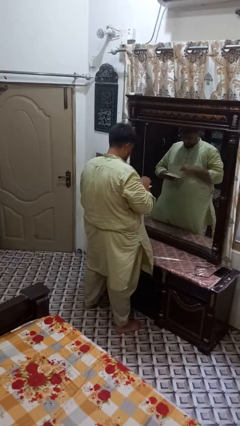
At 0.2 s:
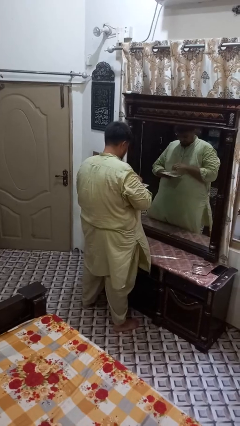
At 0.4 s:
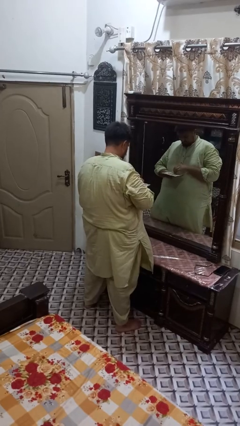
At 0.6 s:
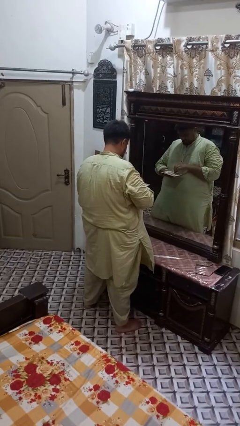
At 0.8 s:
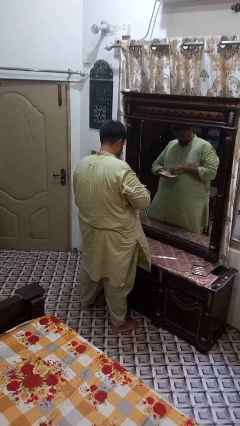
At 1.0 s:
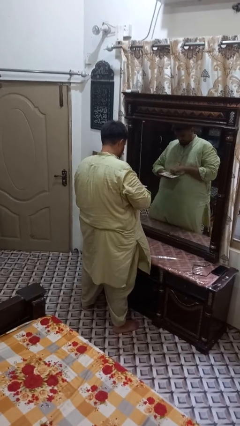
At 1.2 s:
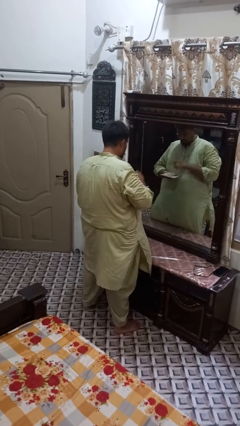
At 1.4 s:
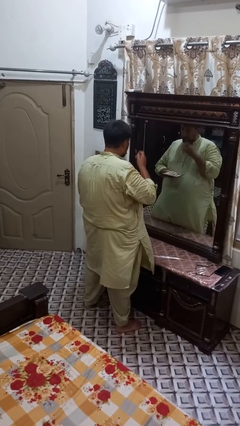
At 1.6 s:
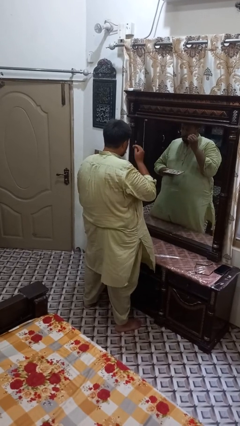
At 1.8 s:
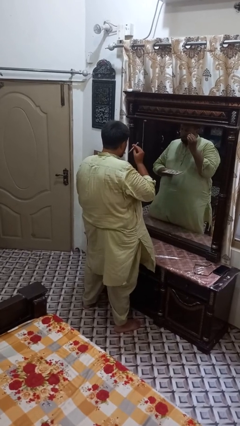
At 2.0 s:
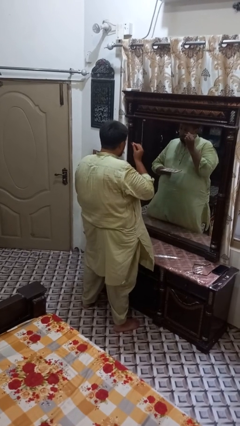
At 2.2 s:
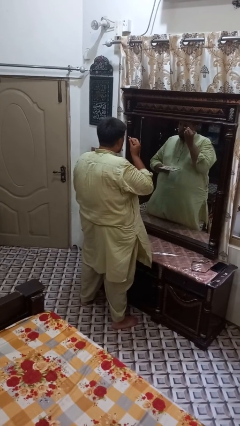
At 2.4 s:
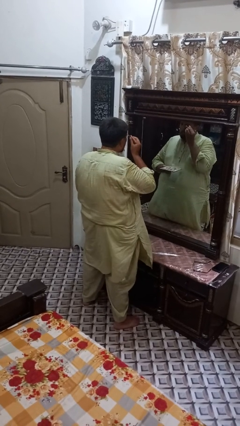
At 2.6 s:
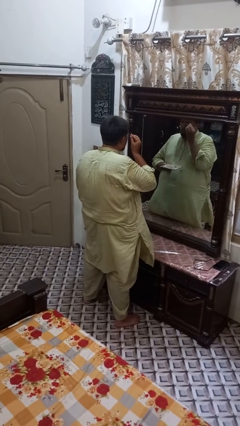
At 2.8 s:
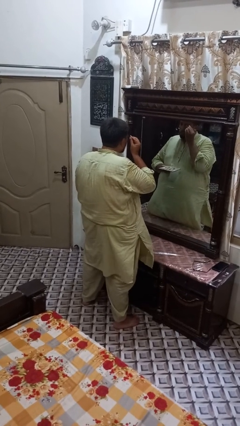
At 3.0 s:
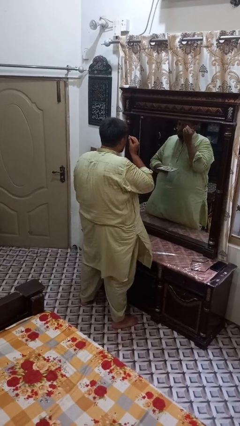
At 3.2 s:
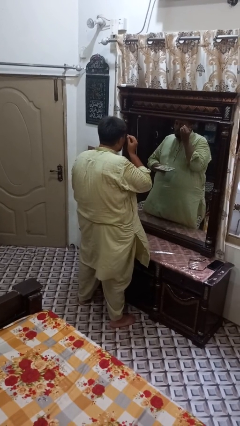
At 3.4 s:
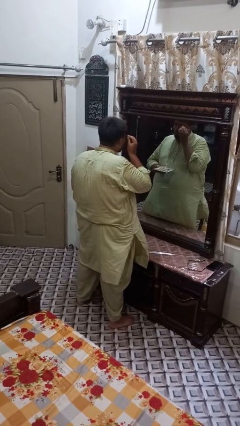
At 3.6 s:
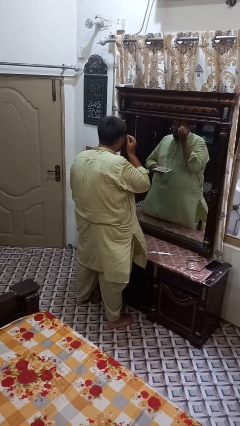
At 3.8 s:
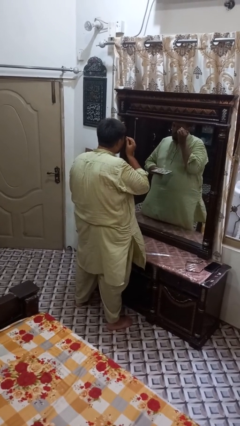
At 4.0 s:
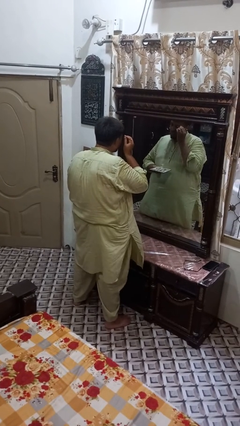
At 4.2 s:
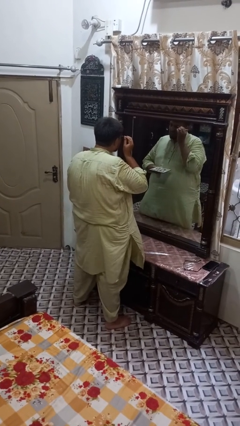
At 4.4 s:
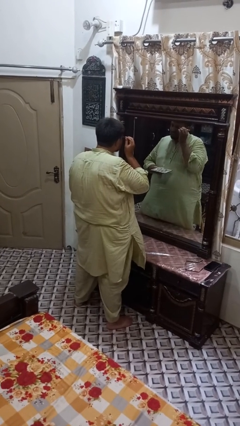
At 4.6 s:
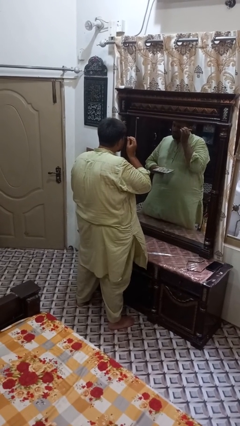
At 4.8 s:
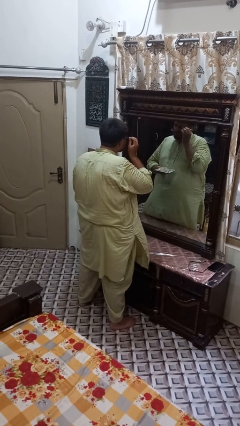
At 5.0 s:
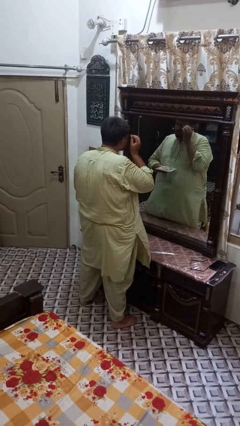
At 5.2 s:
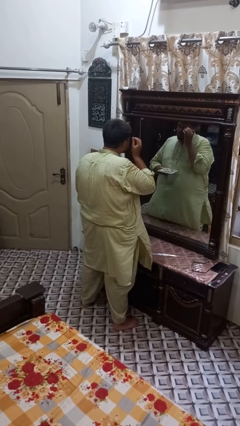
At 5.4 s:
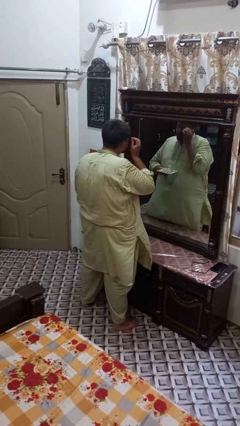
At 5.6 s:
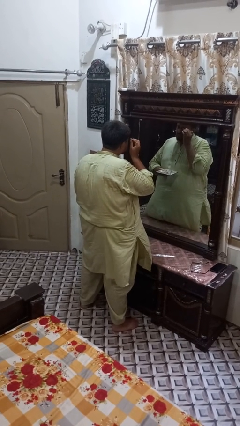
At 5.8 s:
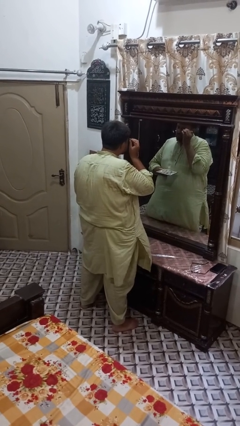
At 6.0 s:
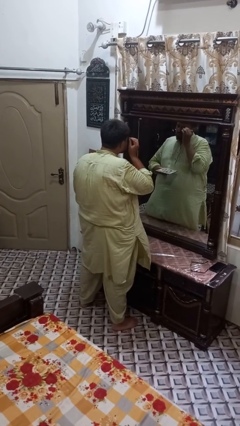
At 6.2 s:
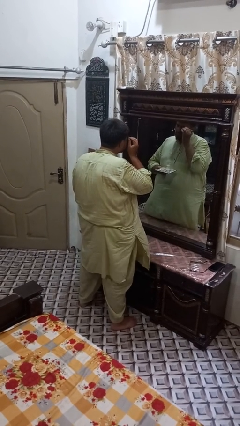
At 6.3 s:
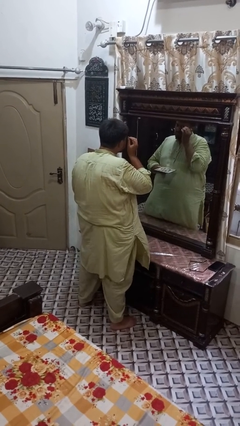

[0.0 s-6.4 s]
person applies eye makeup

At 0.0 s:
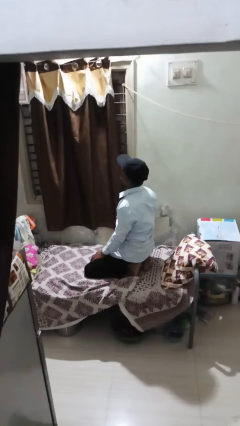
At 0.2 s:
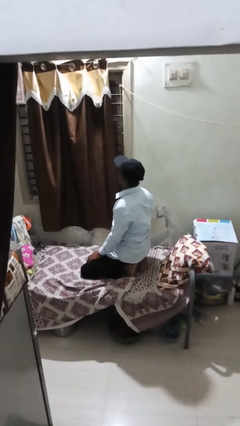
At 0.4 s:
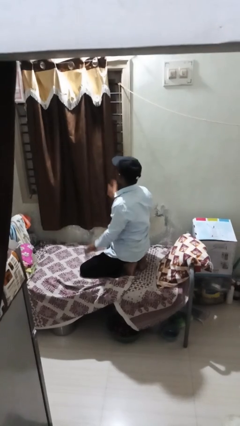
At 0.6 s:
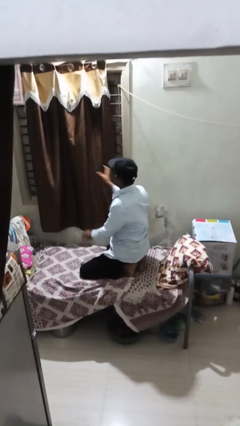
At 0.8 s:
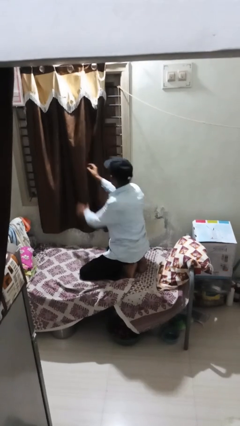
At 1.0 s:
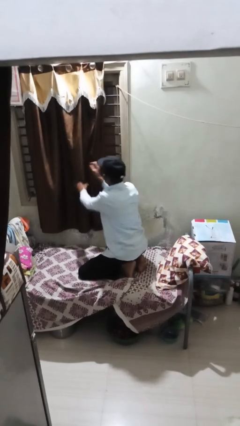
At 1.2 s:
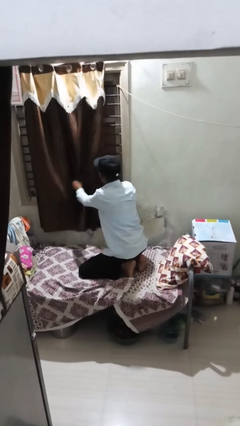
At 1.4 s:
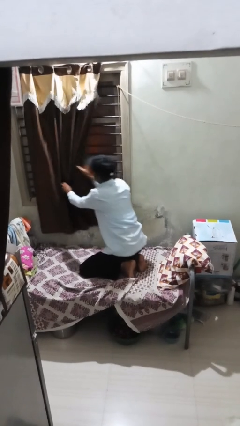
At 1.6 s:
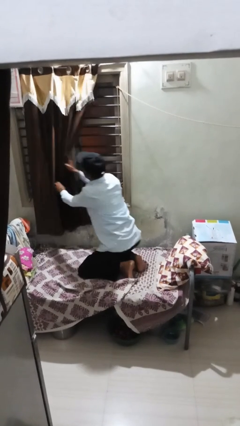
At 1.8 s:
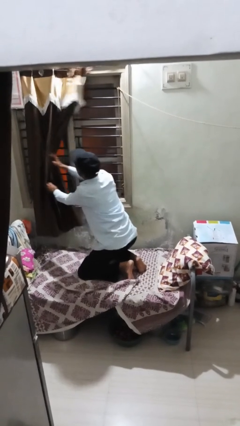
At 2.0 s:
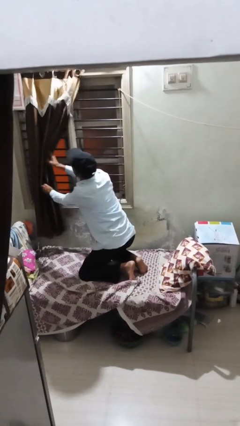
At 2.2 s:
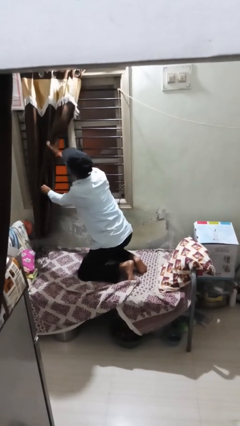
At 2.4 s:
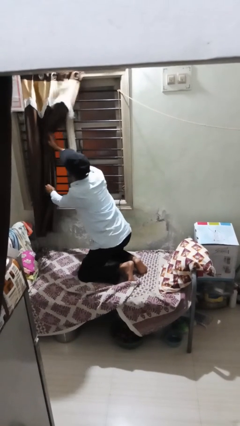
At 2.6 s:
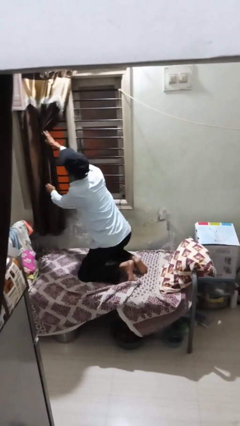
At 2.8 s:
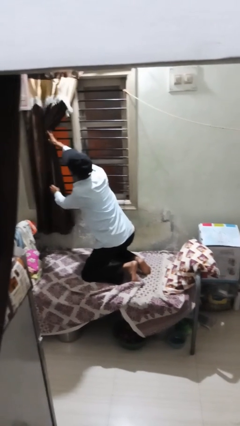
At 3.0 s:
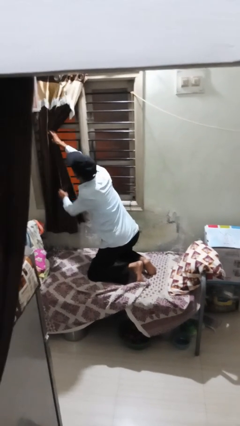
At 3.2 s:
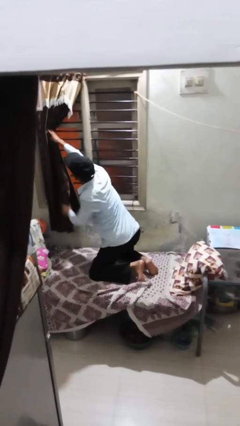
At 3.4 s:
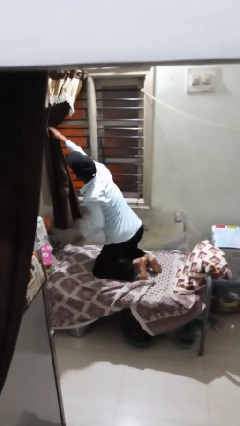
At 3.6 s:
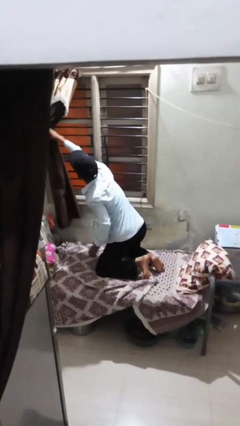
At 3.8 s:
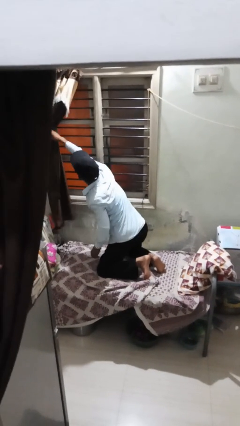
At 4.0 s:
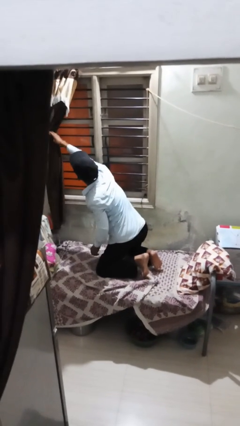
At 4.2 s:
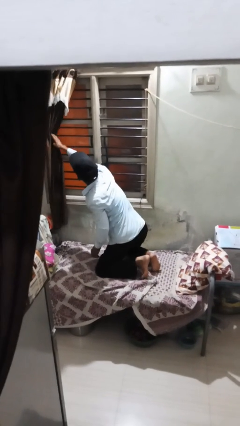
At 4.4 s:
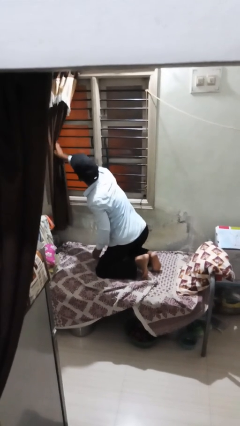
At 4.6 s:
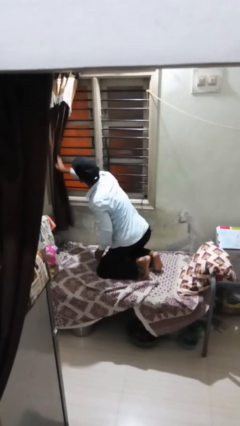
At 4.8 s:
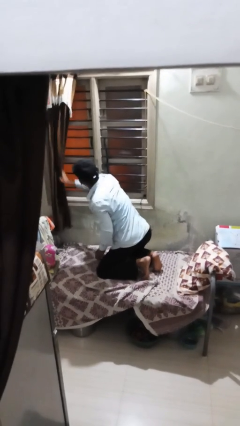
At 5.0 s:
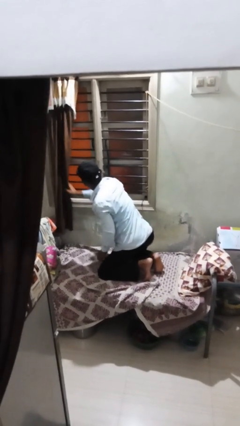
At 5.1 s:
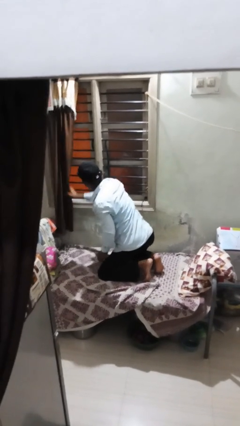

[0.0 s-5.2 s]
person opens curtains

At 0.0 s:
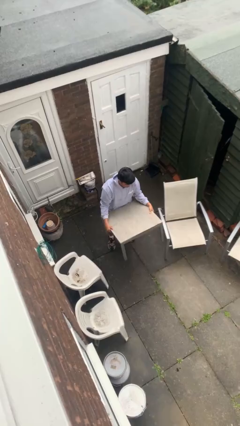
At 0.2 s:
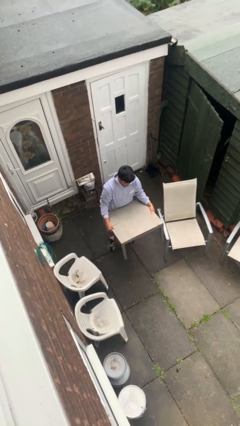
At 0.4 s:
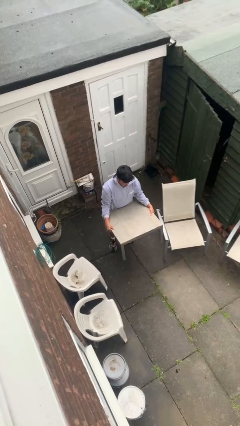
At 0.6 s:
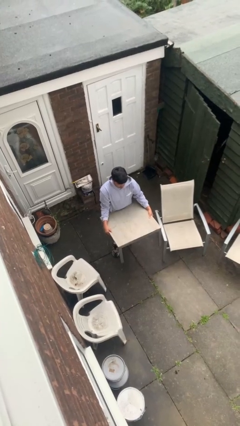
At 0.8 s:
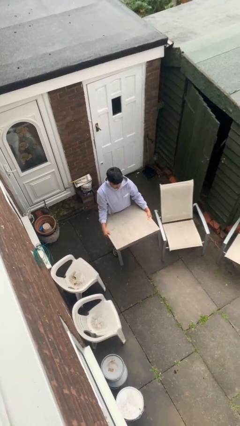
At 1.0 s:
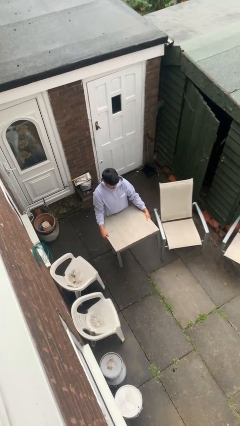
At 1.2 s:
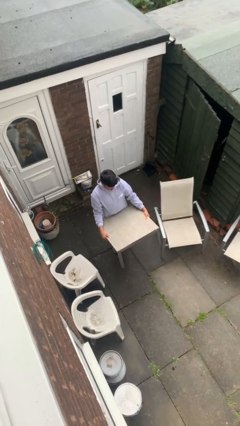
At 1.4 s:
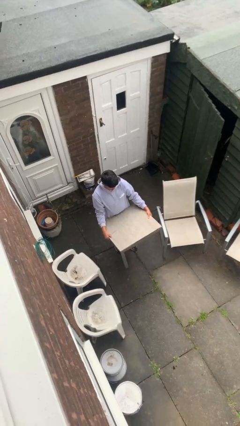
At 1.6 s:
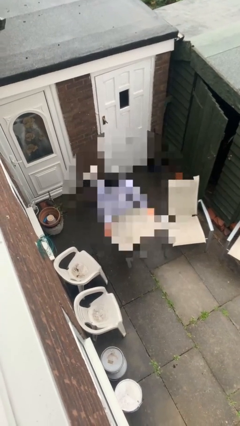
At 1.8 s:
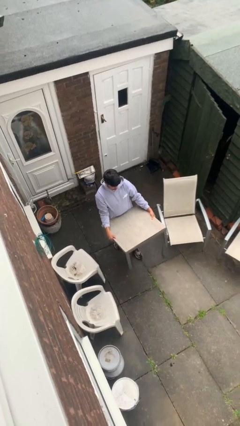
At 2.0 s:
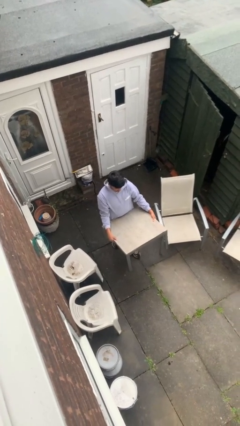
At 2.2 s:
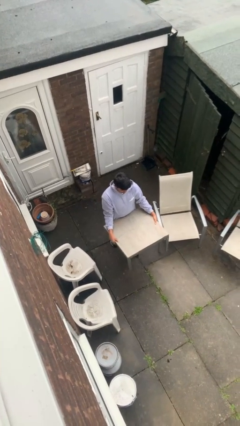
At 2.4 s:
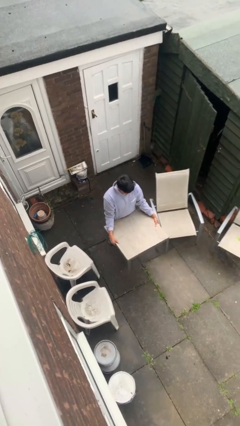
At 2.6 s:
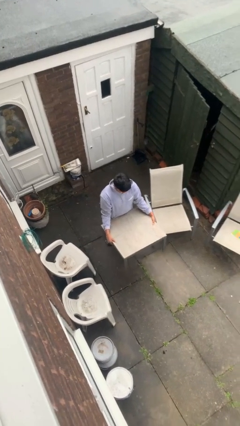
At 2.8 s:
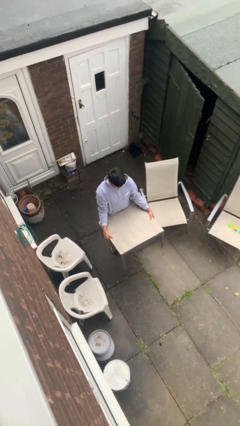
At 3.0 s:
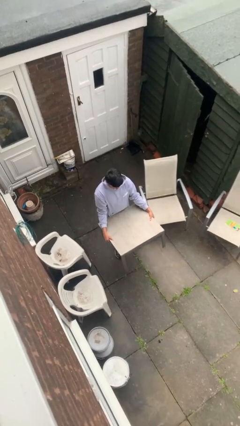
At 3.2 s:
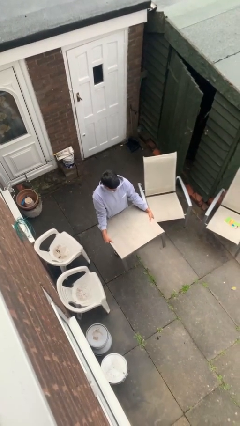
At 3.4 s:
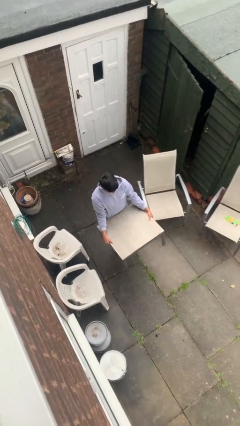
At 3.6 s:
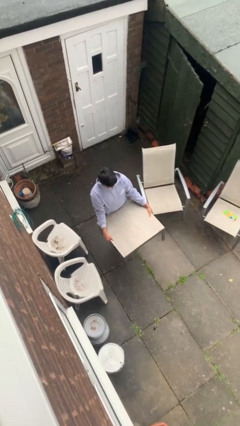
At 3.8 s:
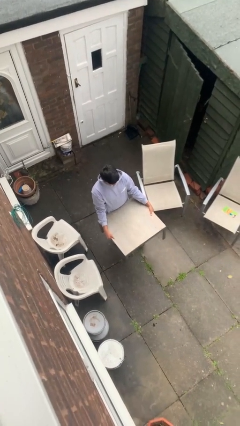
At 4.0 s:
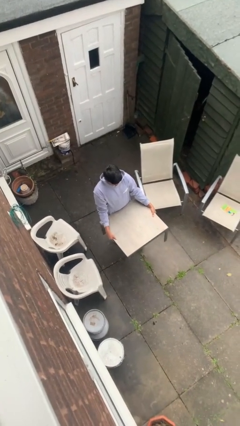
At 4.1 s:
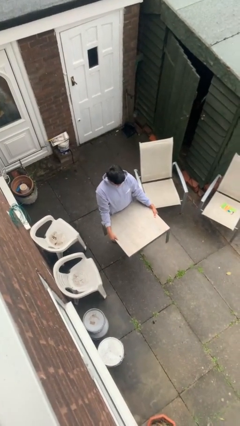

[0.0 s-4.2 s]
person carries heavy object

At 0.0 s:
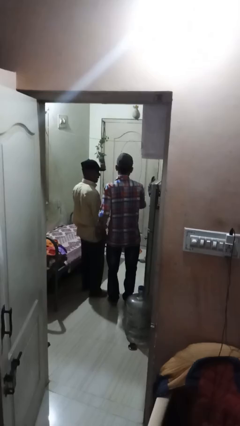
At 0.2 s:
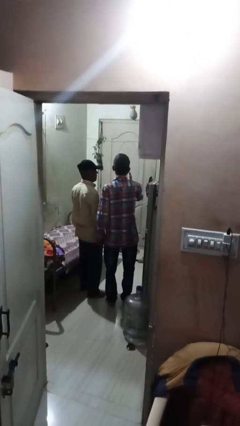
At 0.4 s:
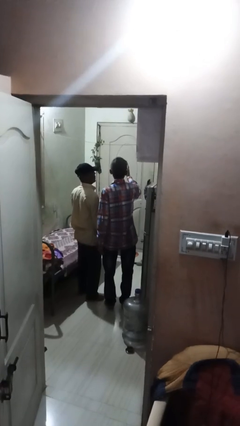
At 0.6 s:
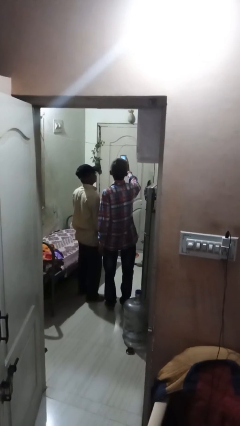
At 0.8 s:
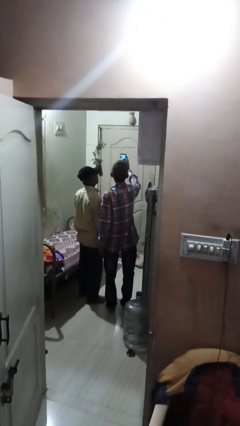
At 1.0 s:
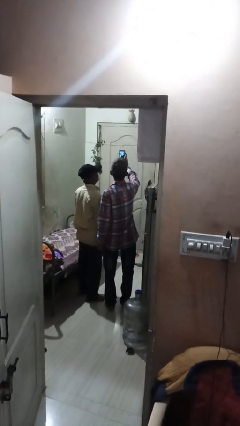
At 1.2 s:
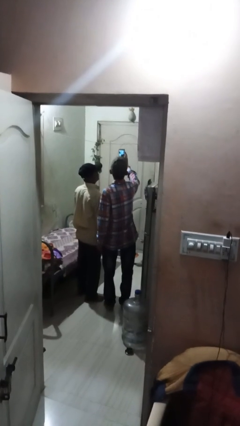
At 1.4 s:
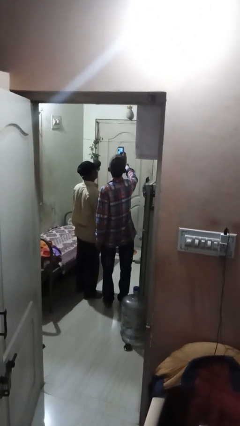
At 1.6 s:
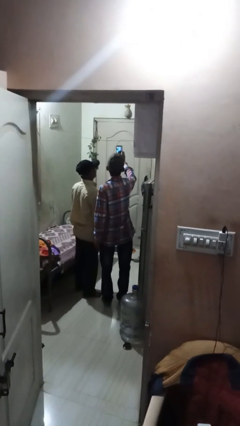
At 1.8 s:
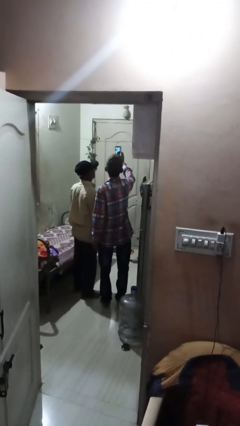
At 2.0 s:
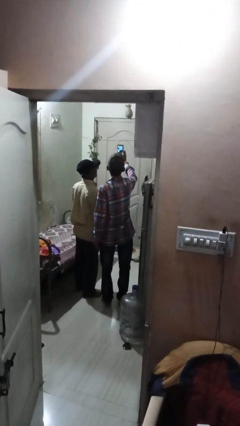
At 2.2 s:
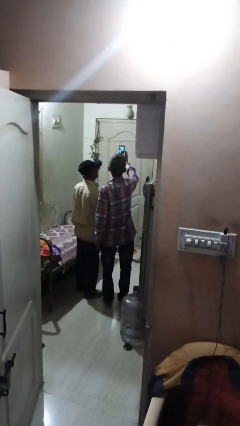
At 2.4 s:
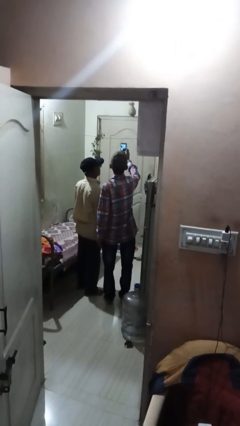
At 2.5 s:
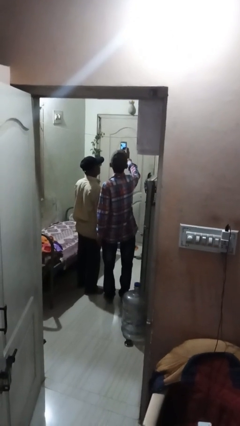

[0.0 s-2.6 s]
person takes selfie with person
